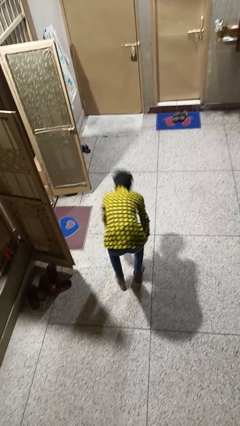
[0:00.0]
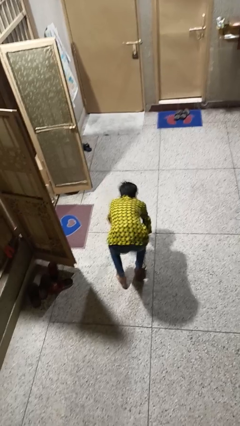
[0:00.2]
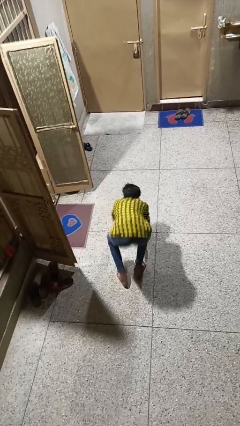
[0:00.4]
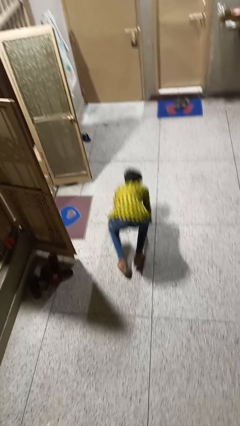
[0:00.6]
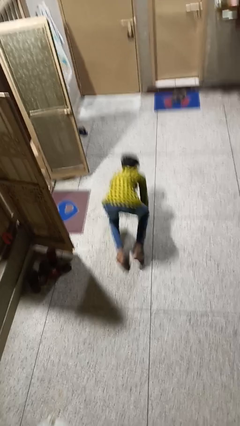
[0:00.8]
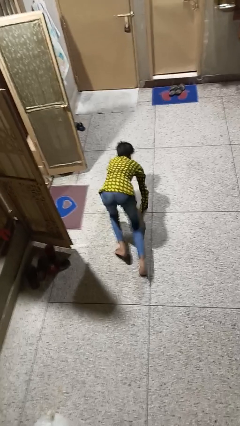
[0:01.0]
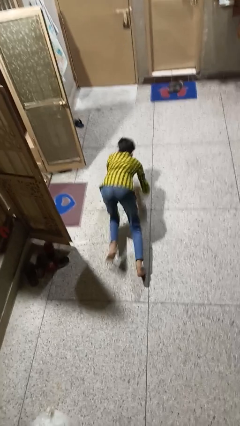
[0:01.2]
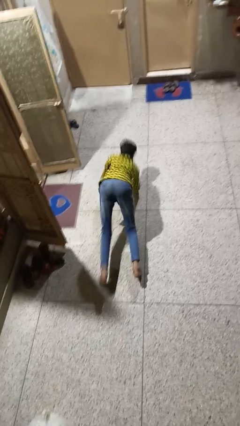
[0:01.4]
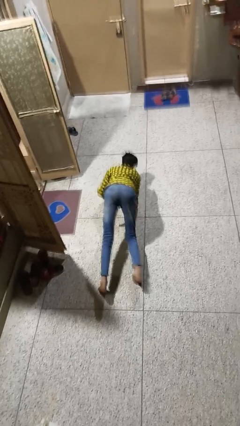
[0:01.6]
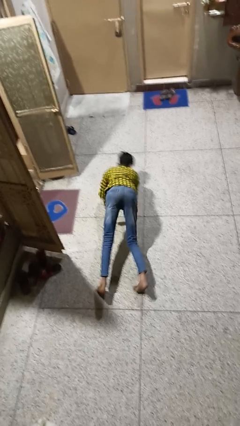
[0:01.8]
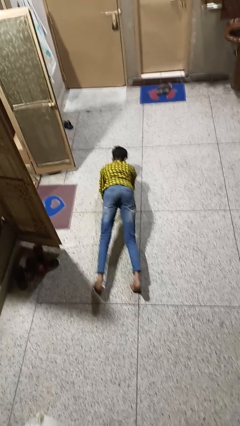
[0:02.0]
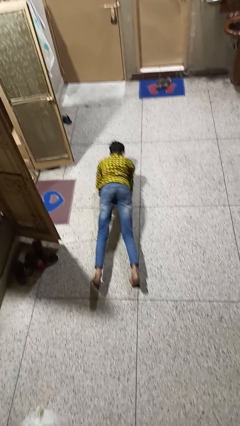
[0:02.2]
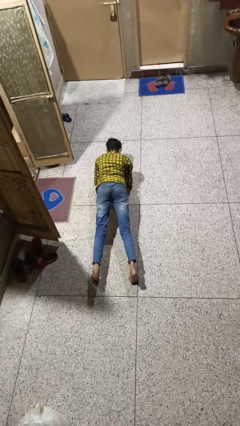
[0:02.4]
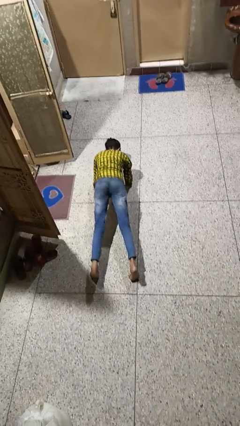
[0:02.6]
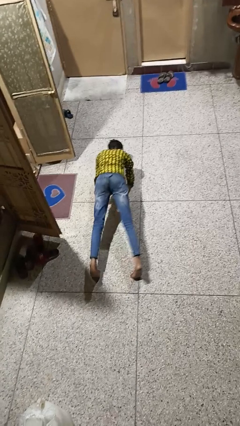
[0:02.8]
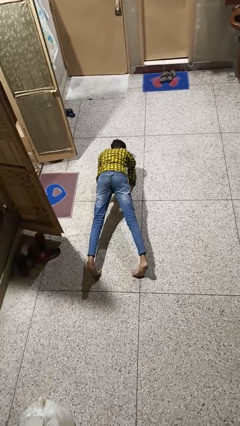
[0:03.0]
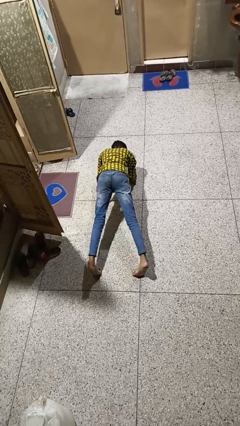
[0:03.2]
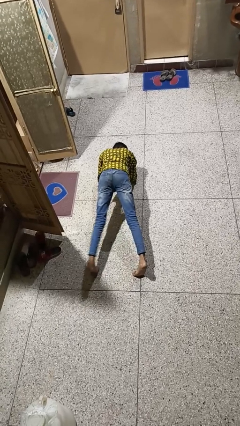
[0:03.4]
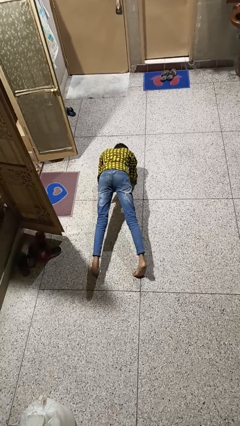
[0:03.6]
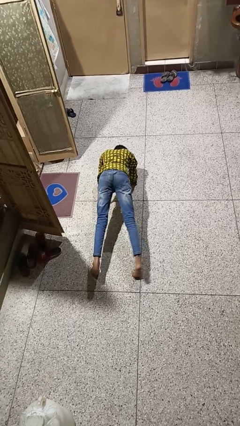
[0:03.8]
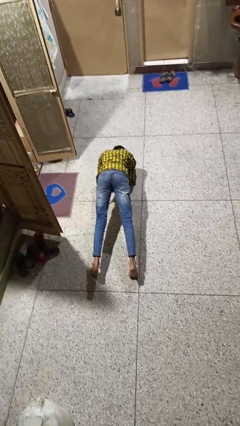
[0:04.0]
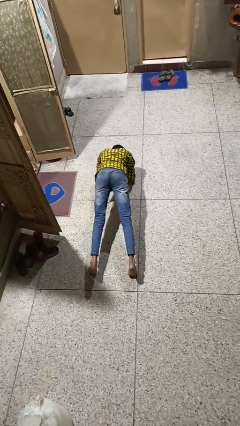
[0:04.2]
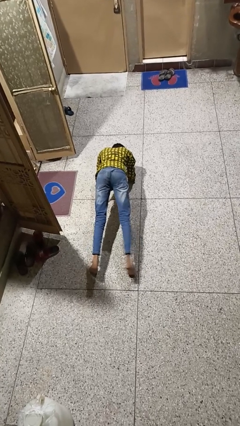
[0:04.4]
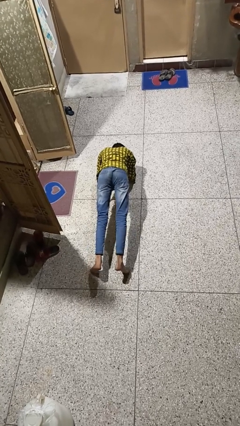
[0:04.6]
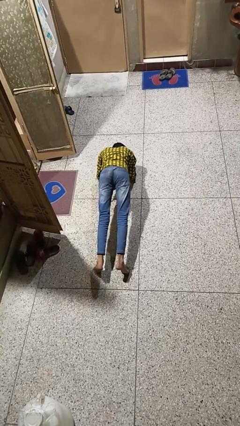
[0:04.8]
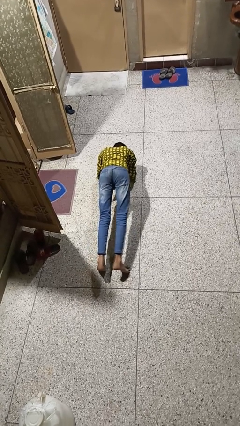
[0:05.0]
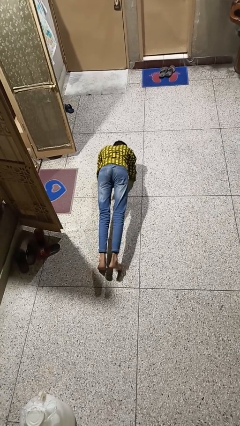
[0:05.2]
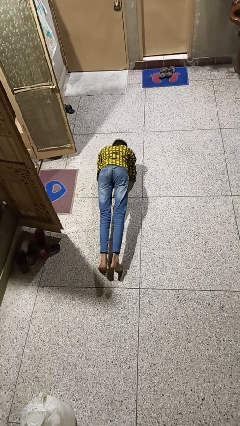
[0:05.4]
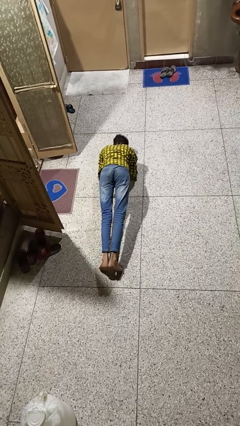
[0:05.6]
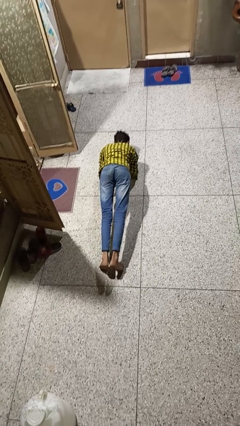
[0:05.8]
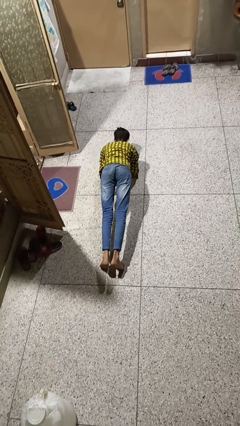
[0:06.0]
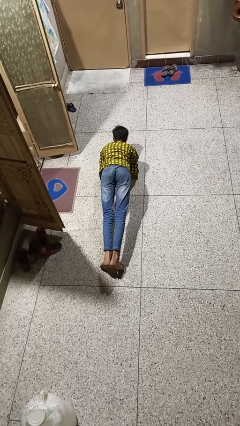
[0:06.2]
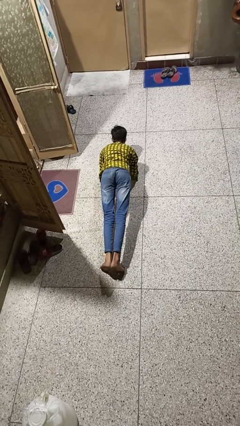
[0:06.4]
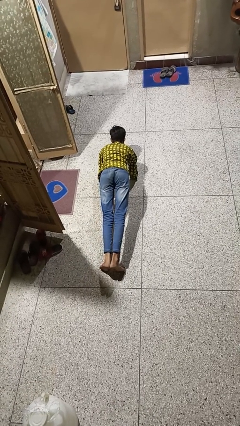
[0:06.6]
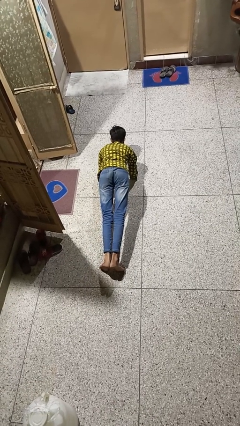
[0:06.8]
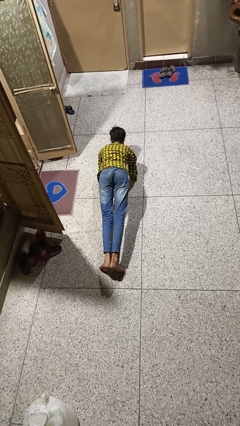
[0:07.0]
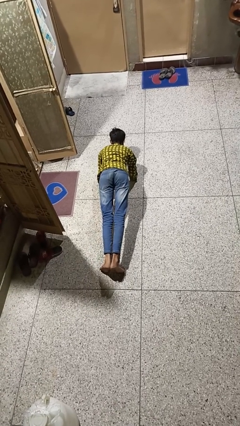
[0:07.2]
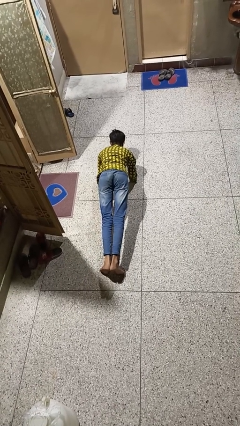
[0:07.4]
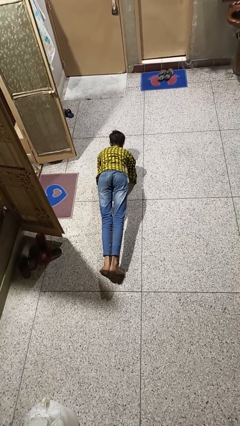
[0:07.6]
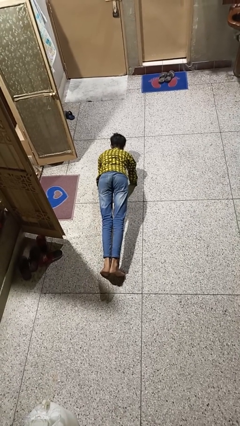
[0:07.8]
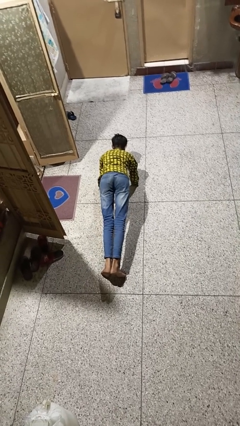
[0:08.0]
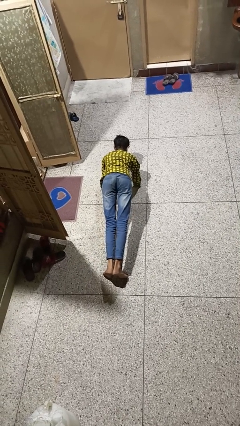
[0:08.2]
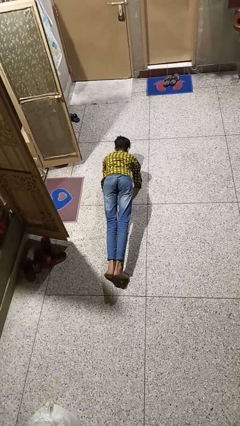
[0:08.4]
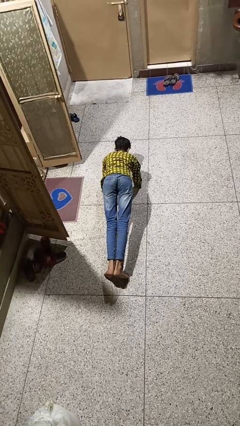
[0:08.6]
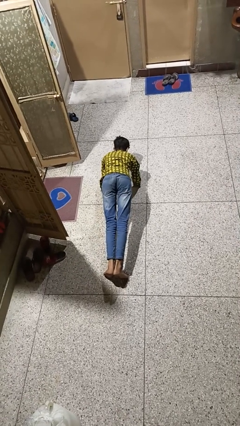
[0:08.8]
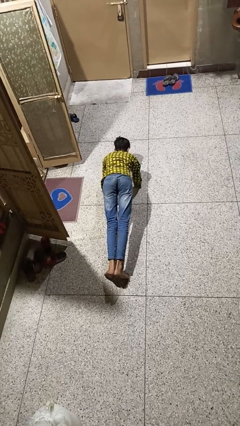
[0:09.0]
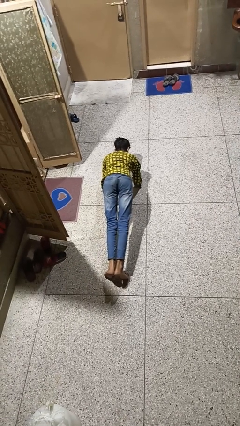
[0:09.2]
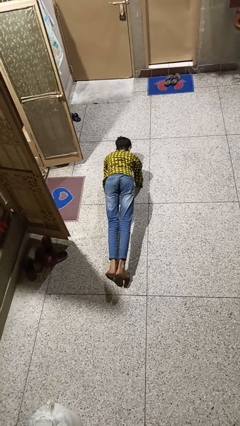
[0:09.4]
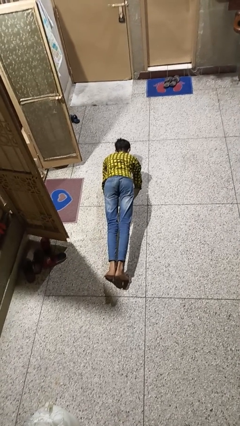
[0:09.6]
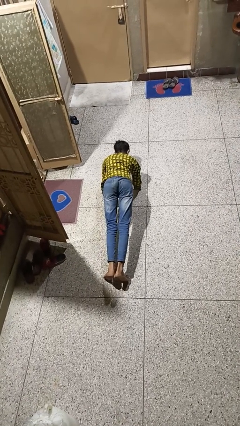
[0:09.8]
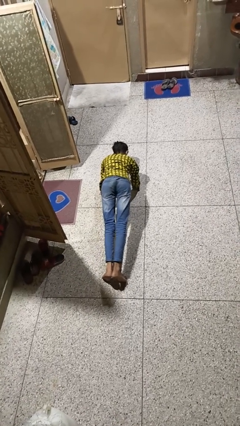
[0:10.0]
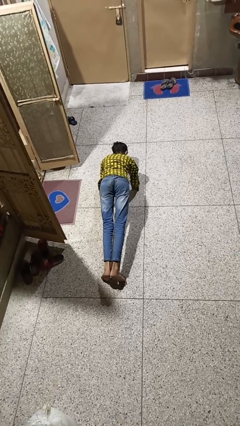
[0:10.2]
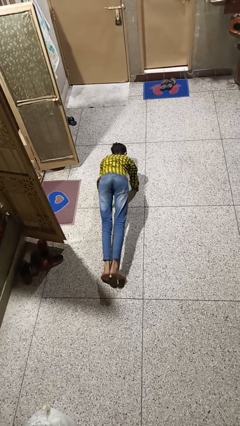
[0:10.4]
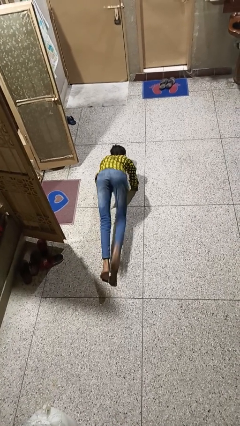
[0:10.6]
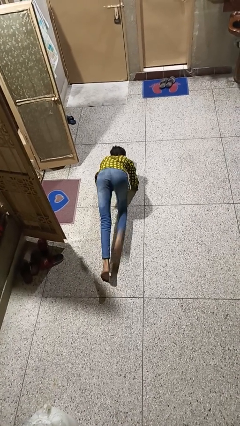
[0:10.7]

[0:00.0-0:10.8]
person exercises with plank

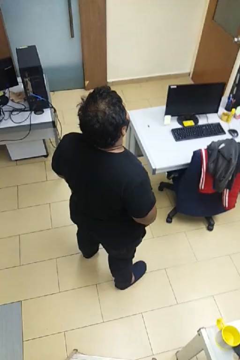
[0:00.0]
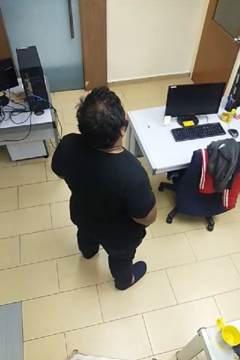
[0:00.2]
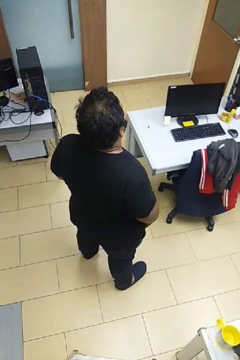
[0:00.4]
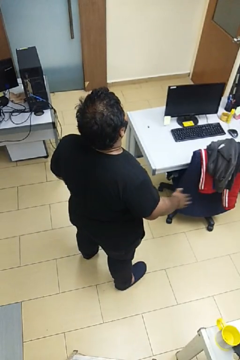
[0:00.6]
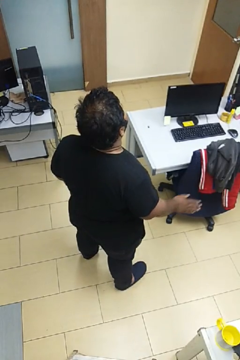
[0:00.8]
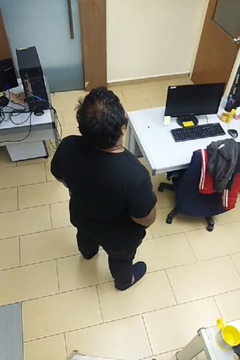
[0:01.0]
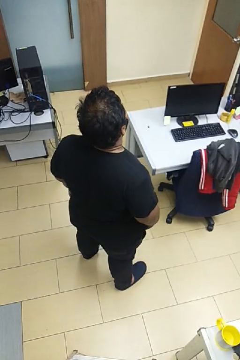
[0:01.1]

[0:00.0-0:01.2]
person slaps hands on thighs

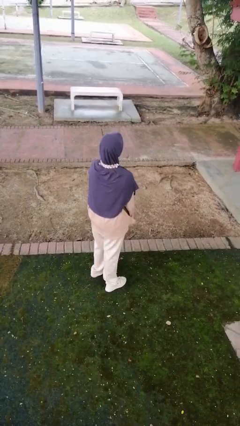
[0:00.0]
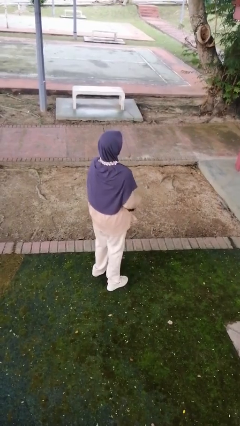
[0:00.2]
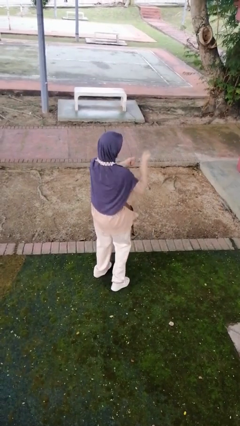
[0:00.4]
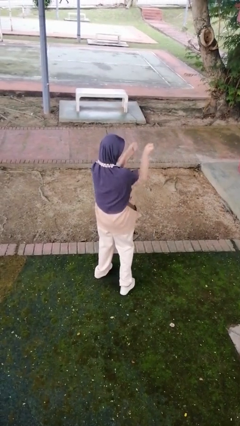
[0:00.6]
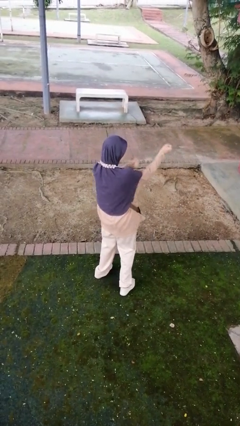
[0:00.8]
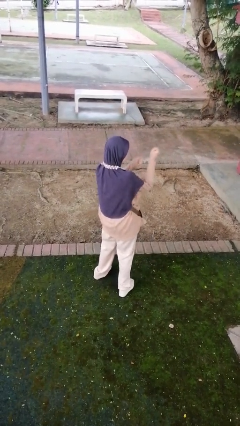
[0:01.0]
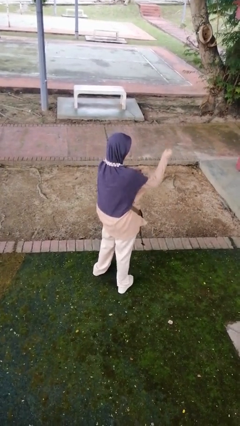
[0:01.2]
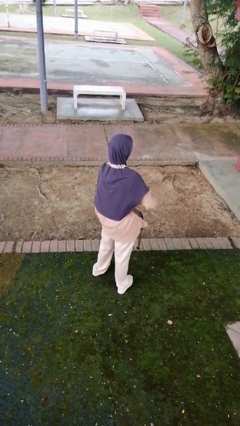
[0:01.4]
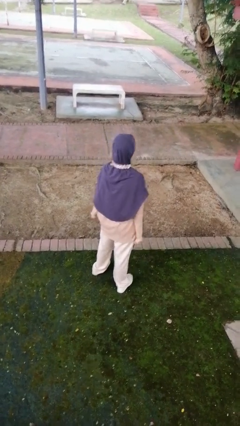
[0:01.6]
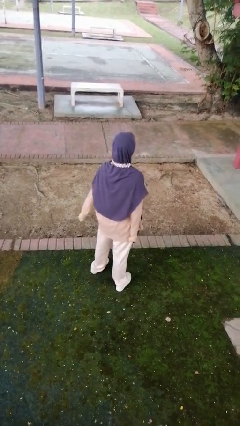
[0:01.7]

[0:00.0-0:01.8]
person punches

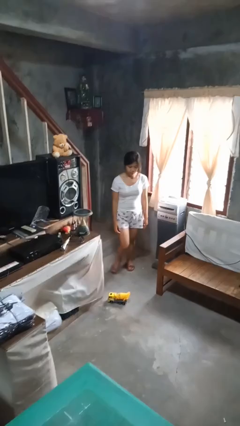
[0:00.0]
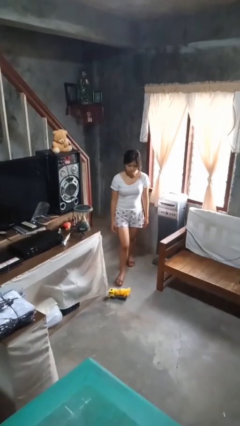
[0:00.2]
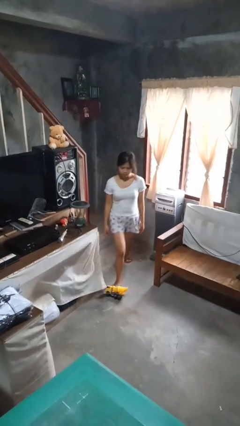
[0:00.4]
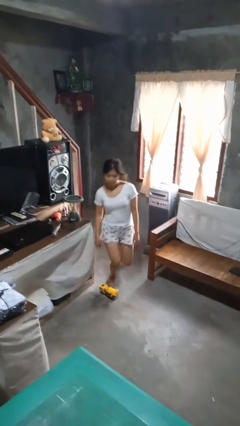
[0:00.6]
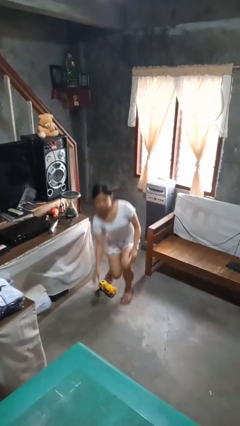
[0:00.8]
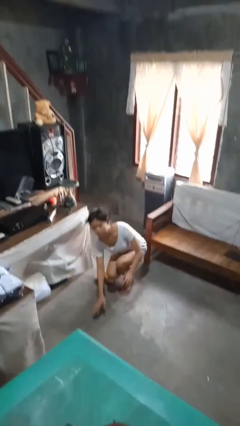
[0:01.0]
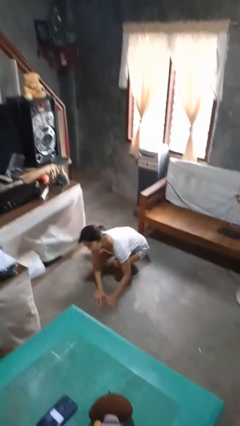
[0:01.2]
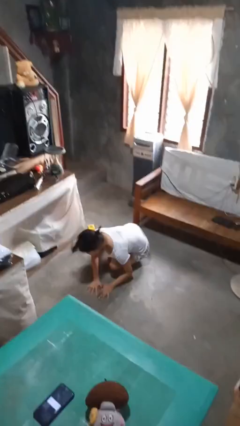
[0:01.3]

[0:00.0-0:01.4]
person trips on object on floor

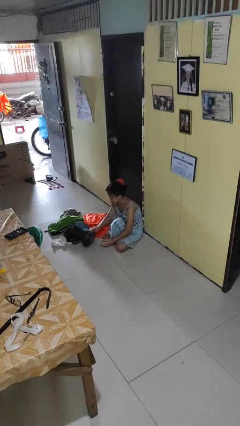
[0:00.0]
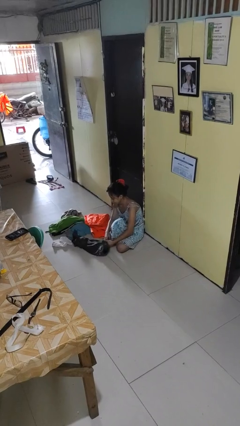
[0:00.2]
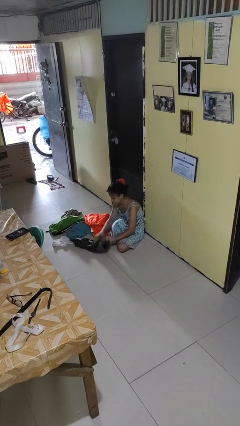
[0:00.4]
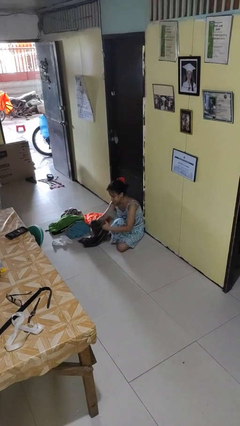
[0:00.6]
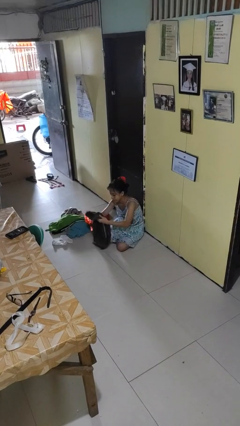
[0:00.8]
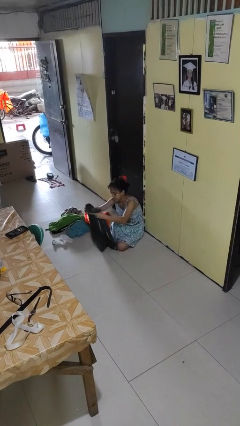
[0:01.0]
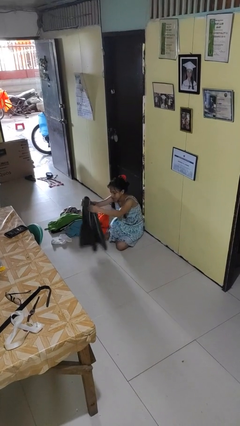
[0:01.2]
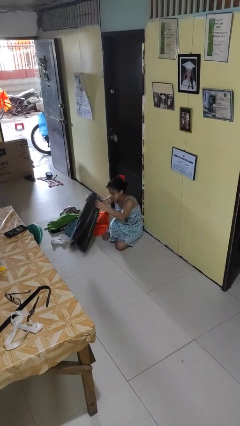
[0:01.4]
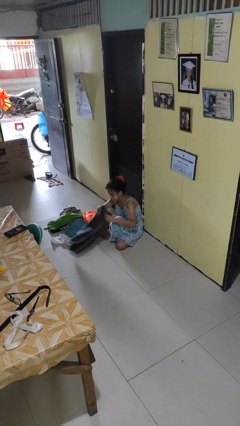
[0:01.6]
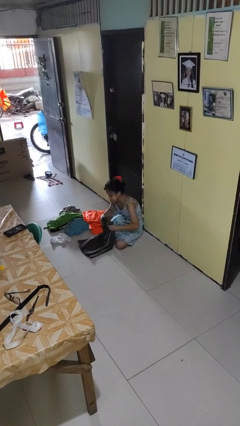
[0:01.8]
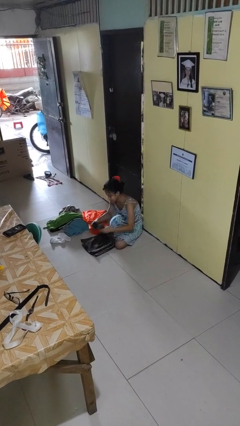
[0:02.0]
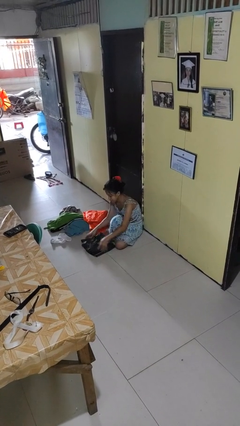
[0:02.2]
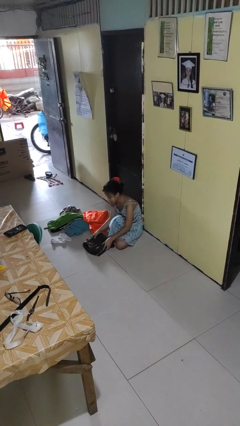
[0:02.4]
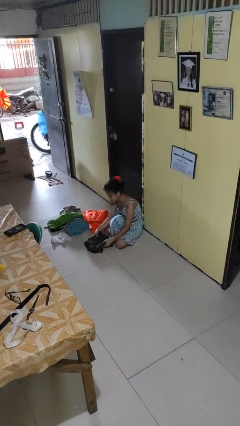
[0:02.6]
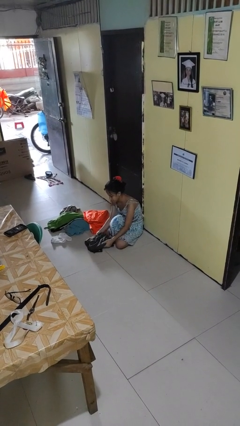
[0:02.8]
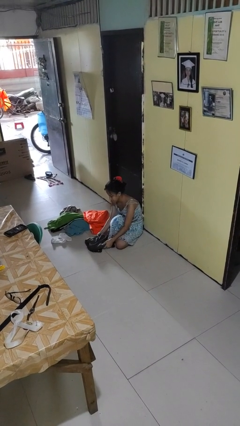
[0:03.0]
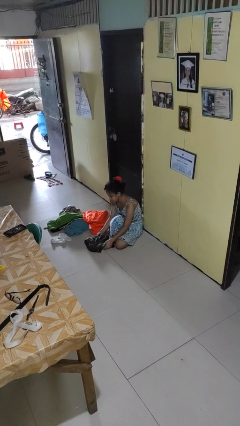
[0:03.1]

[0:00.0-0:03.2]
person folds pants
